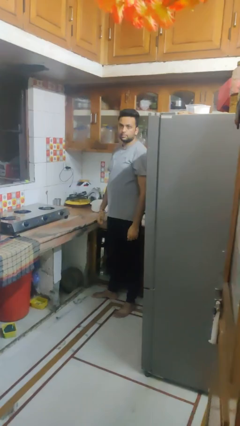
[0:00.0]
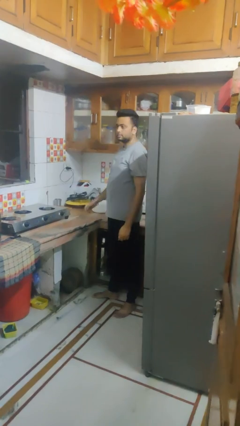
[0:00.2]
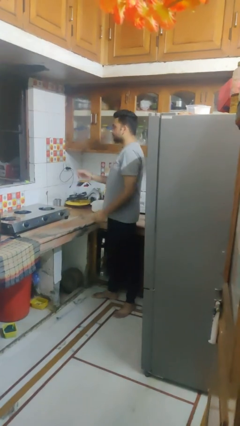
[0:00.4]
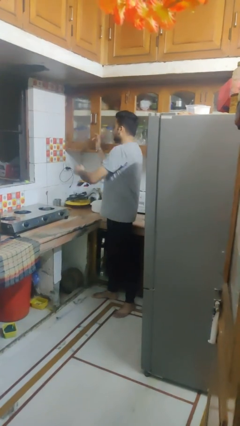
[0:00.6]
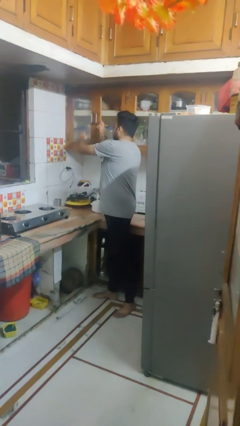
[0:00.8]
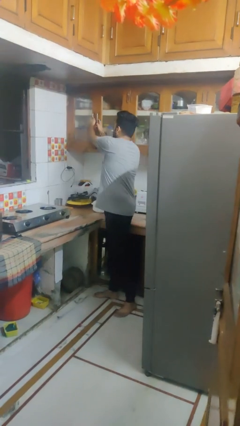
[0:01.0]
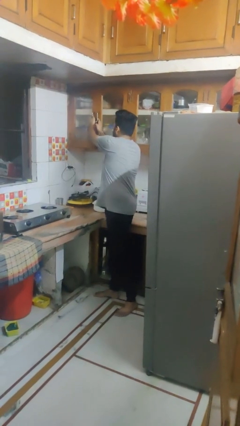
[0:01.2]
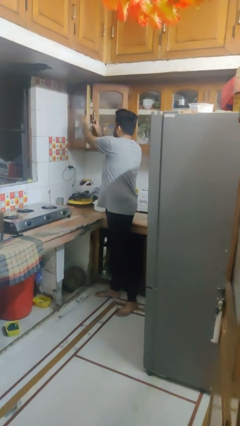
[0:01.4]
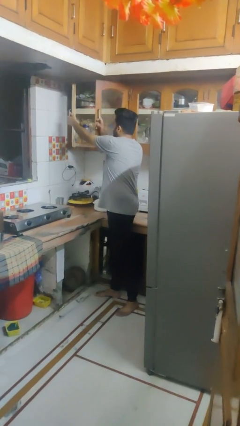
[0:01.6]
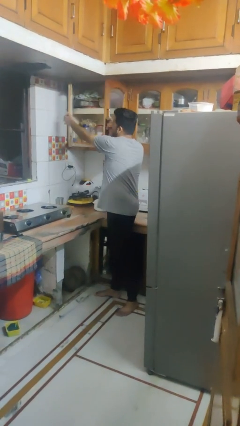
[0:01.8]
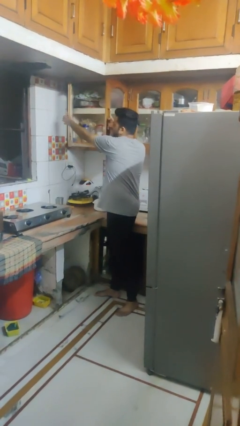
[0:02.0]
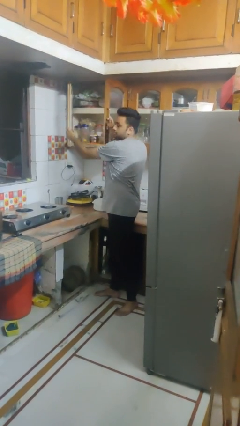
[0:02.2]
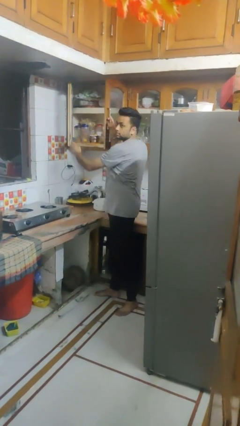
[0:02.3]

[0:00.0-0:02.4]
person opens cabinet

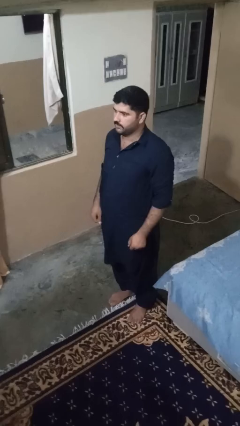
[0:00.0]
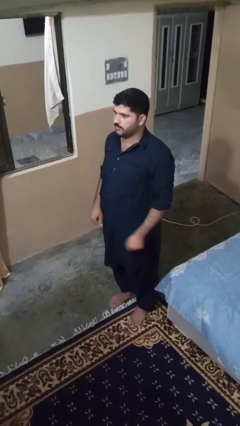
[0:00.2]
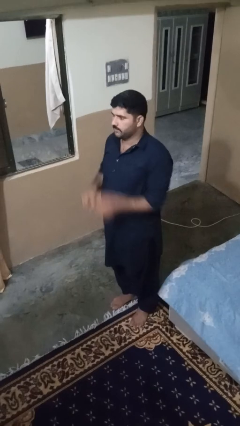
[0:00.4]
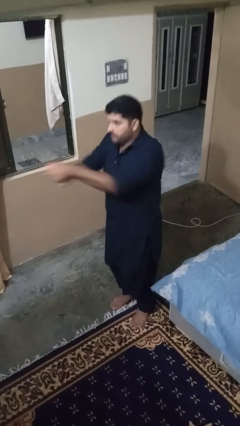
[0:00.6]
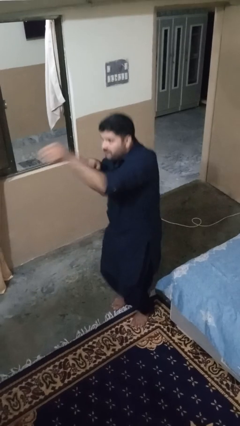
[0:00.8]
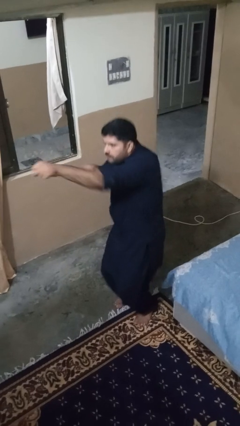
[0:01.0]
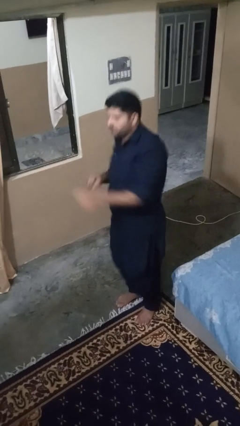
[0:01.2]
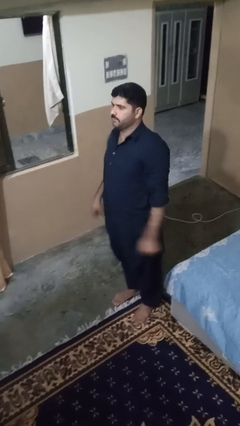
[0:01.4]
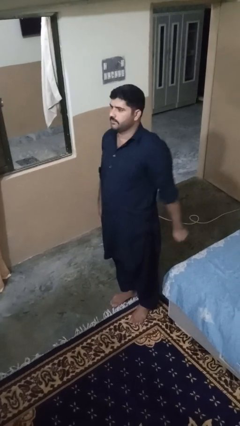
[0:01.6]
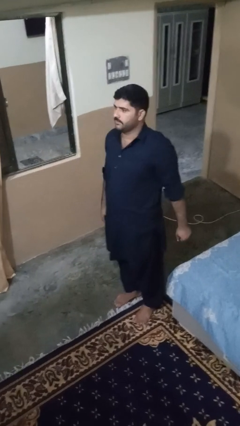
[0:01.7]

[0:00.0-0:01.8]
person karate kicks

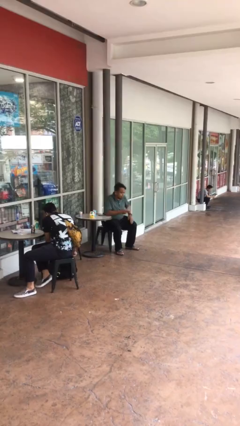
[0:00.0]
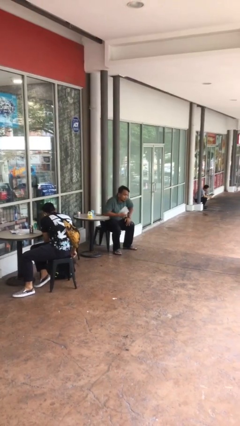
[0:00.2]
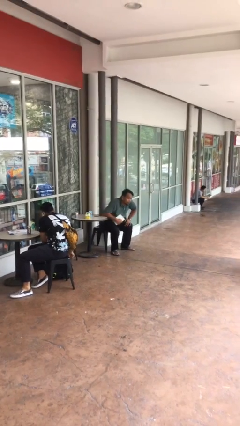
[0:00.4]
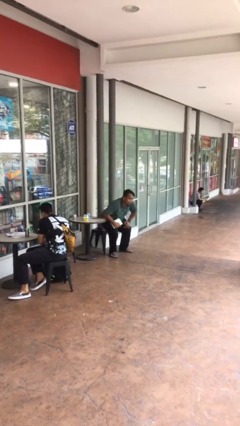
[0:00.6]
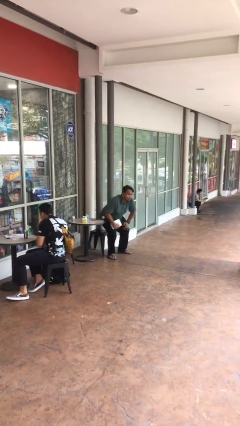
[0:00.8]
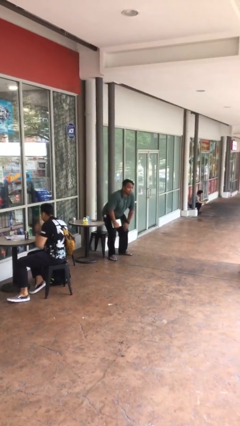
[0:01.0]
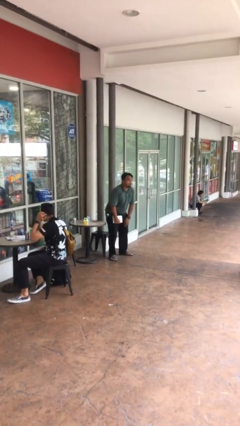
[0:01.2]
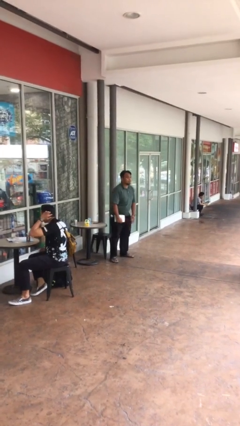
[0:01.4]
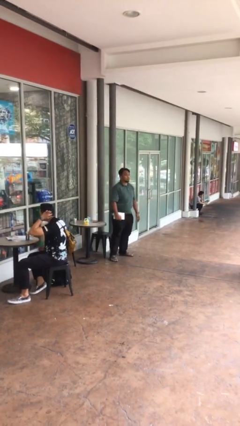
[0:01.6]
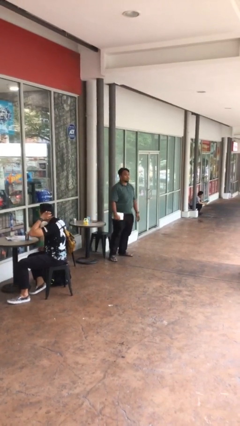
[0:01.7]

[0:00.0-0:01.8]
person stands up

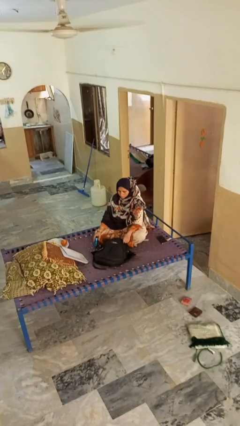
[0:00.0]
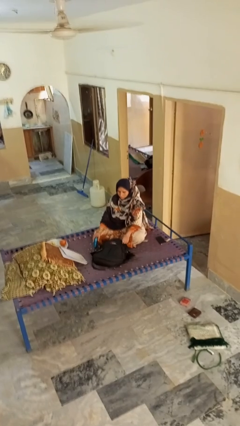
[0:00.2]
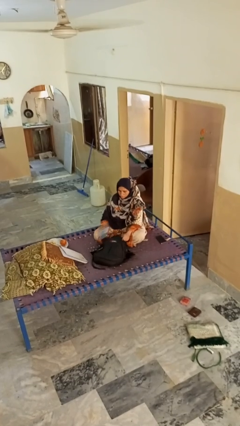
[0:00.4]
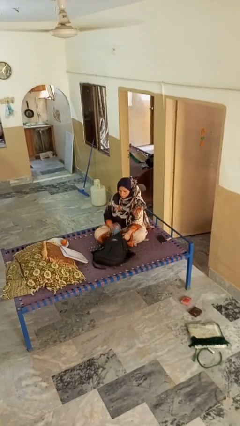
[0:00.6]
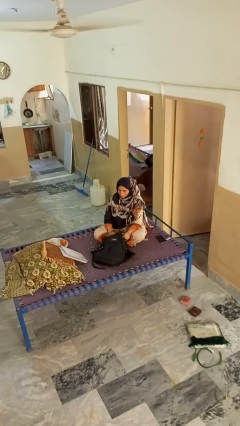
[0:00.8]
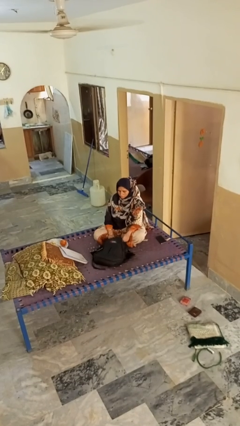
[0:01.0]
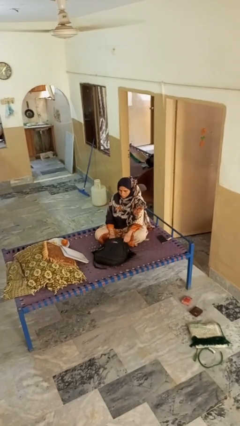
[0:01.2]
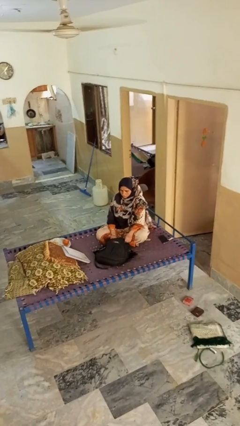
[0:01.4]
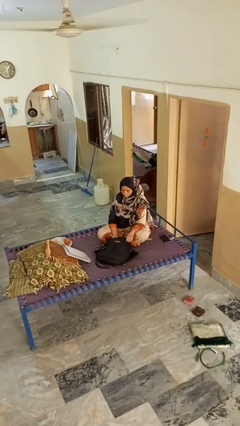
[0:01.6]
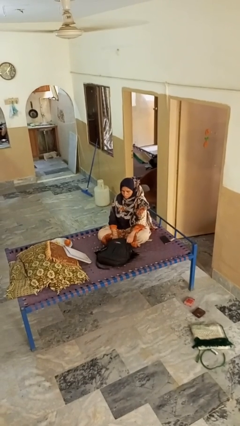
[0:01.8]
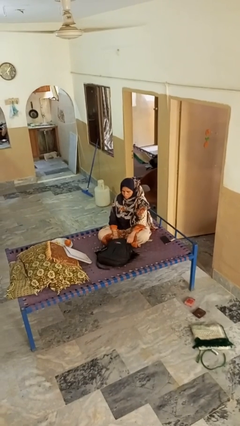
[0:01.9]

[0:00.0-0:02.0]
person puts object into bag

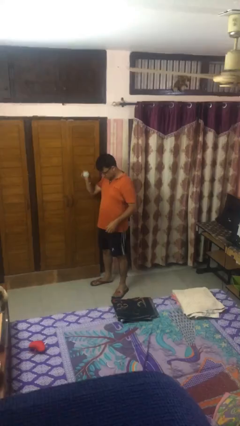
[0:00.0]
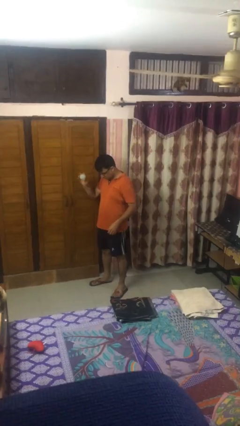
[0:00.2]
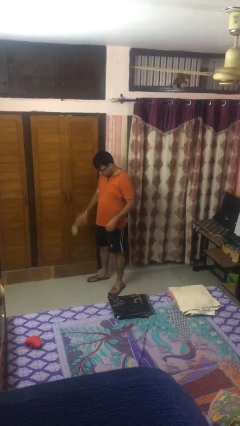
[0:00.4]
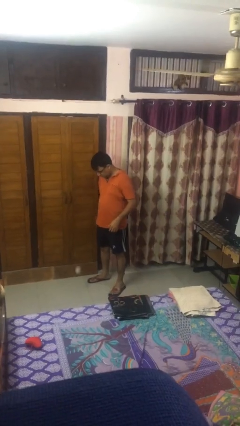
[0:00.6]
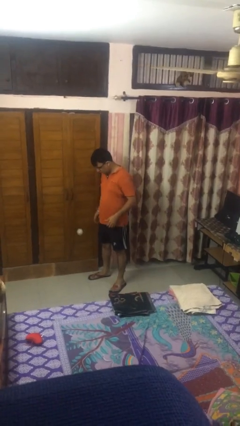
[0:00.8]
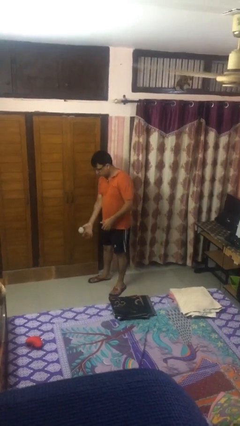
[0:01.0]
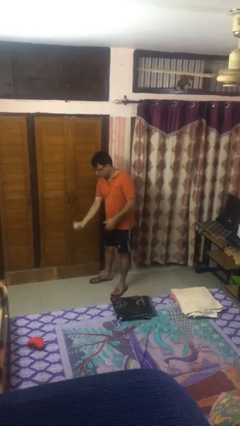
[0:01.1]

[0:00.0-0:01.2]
person bounces ball on floor

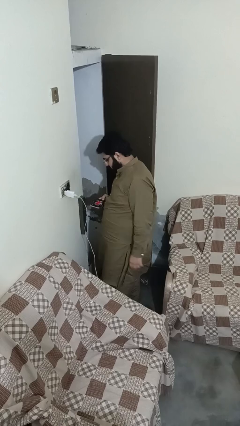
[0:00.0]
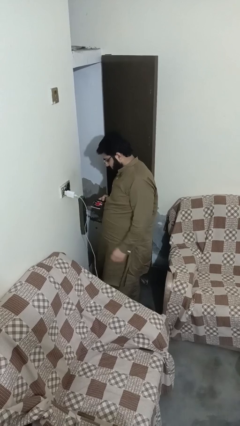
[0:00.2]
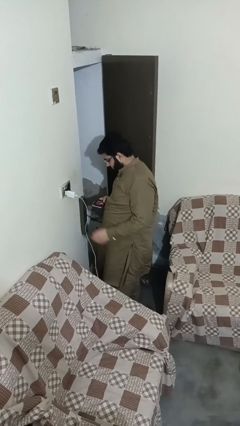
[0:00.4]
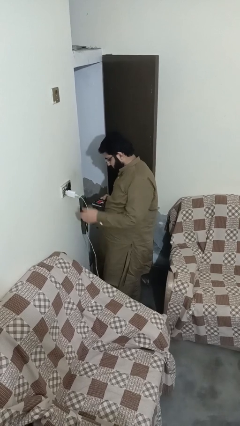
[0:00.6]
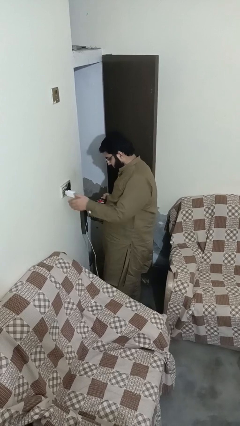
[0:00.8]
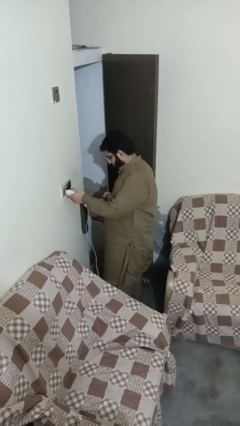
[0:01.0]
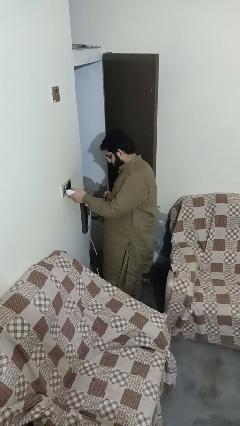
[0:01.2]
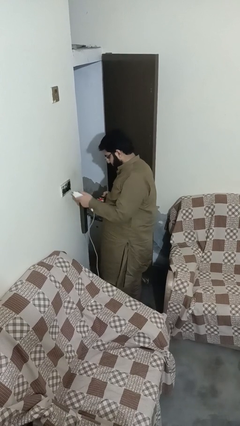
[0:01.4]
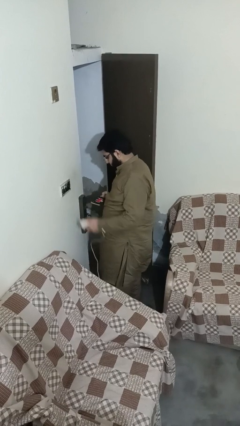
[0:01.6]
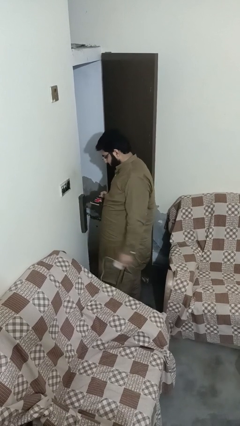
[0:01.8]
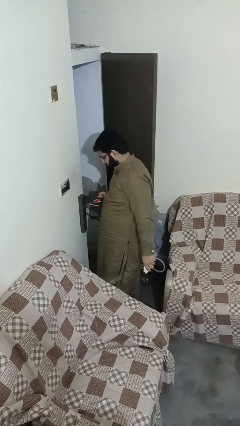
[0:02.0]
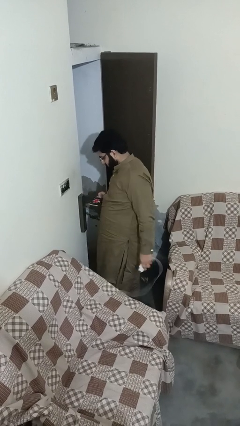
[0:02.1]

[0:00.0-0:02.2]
person unplugs from electrical socket

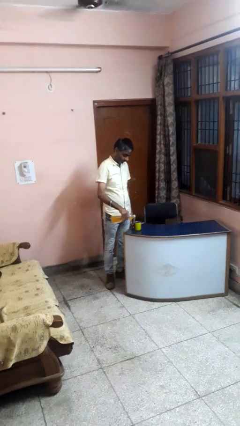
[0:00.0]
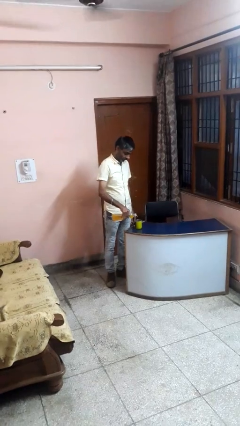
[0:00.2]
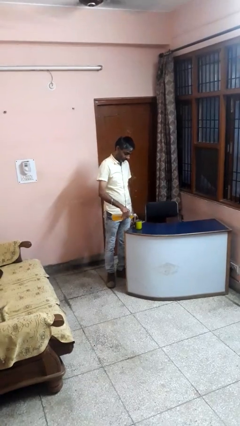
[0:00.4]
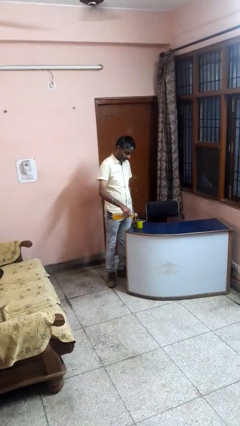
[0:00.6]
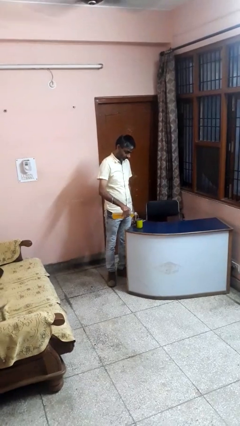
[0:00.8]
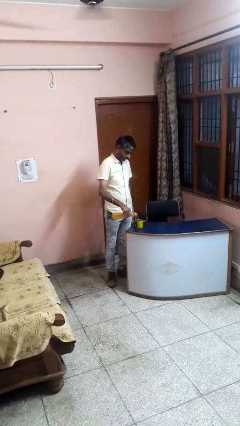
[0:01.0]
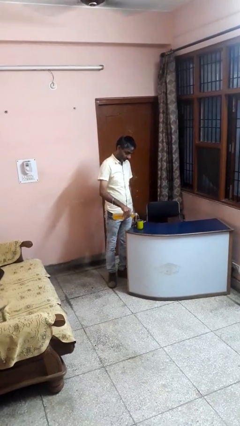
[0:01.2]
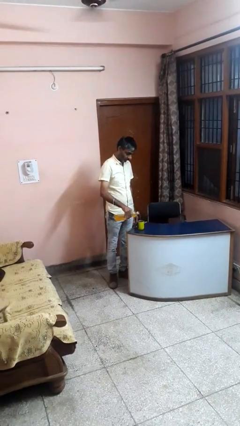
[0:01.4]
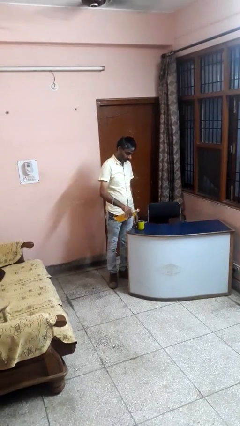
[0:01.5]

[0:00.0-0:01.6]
person pours liquid into cup

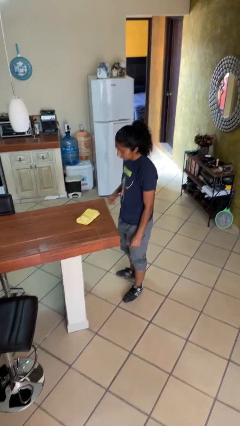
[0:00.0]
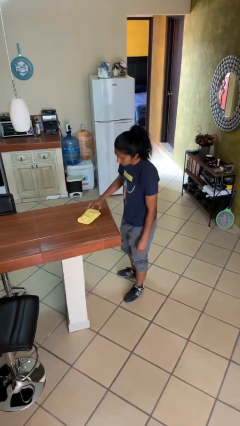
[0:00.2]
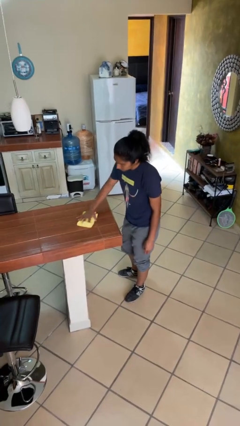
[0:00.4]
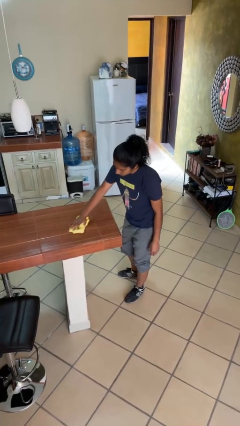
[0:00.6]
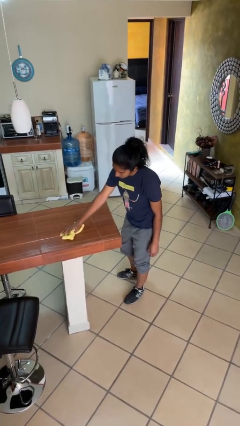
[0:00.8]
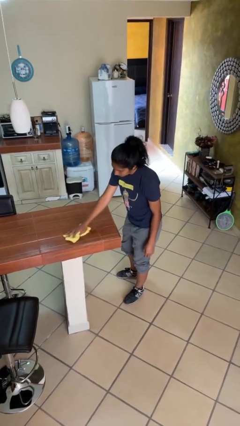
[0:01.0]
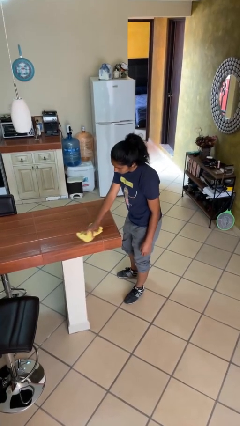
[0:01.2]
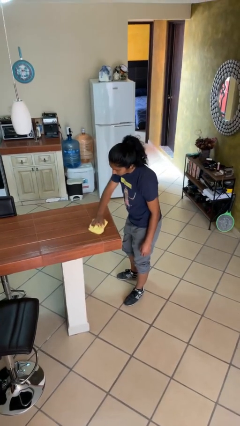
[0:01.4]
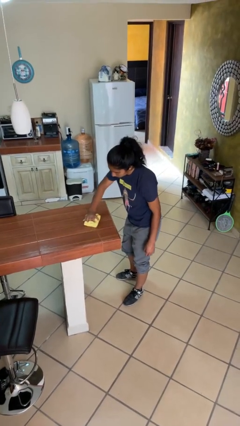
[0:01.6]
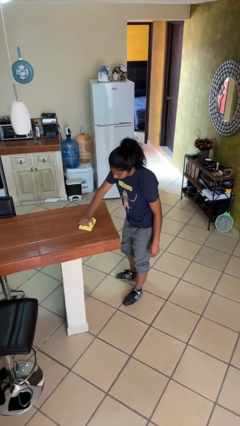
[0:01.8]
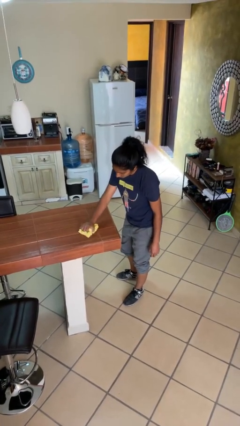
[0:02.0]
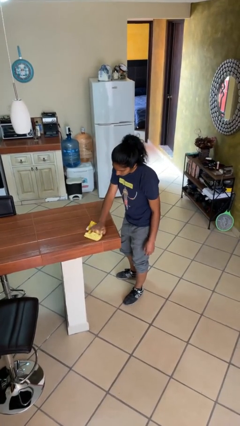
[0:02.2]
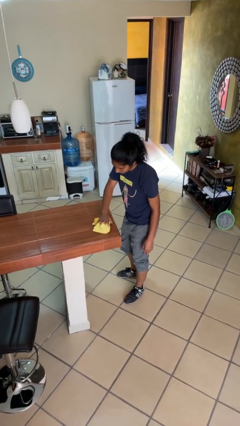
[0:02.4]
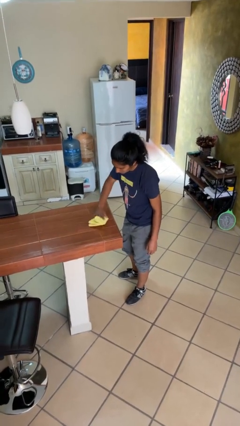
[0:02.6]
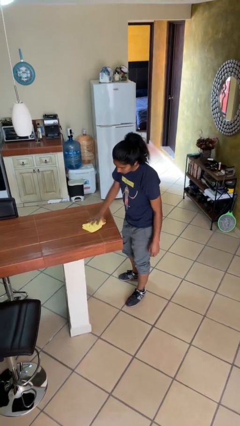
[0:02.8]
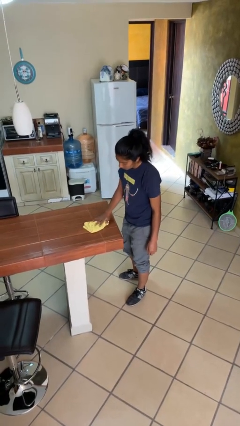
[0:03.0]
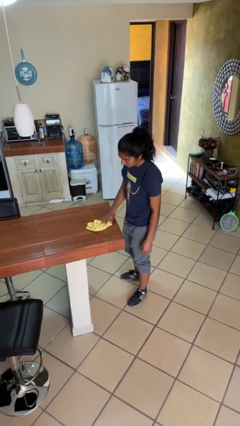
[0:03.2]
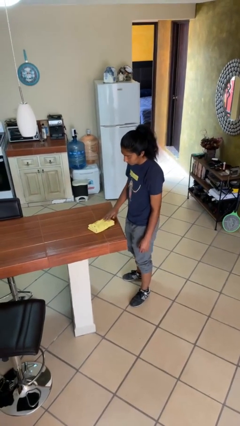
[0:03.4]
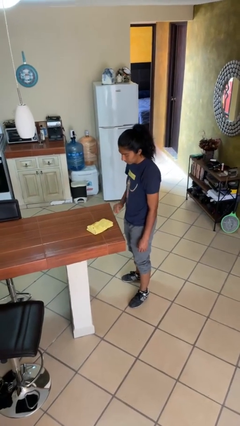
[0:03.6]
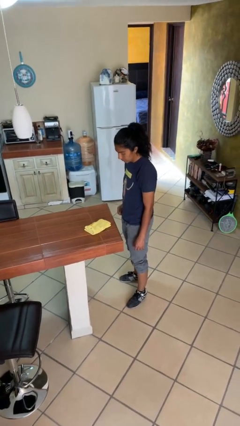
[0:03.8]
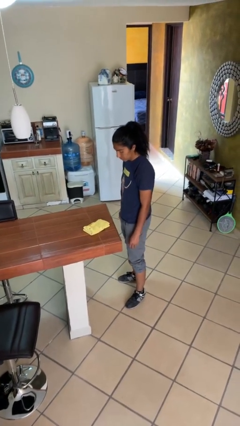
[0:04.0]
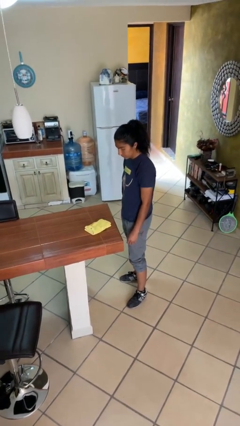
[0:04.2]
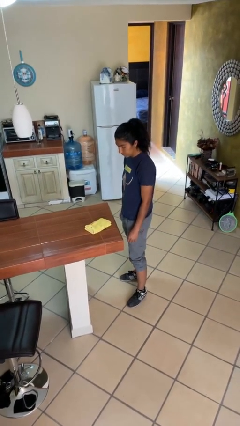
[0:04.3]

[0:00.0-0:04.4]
person cleans table with rag
